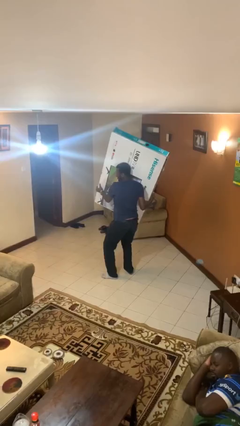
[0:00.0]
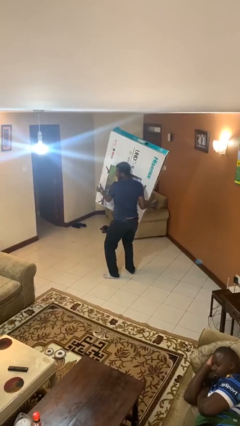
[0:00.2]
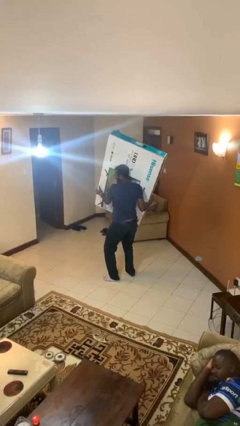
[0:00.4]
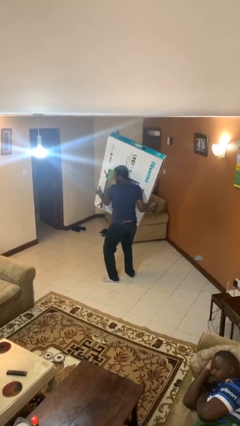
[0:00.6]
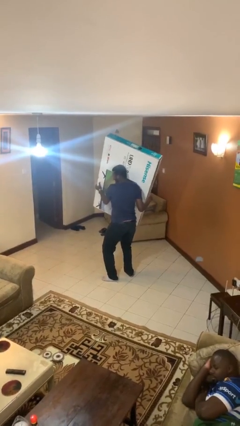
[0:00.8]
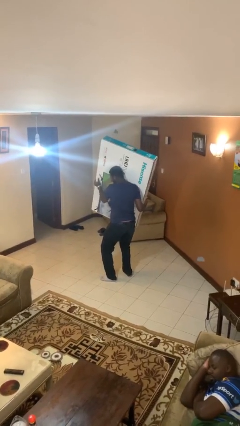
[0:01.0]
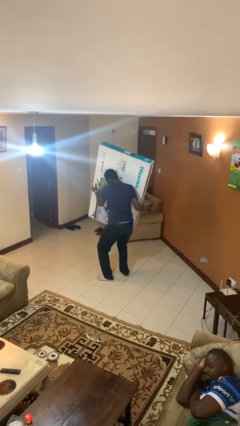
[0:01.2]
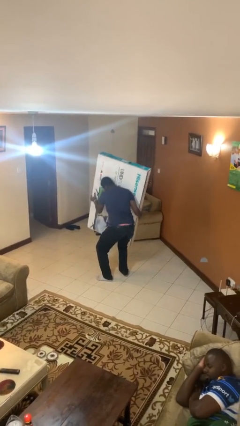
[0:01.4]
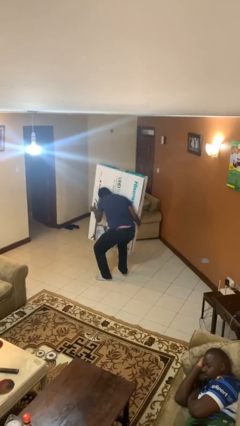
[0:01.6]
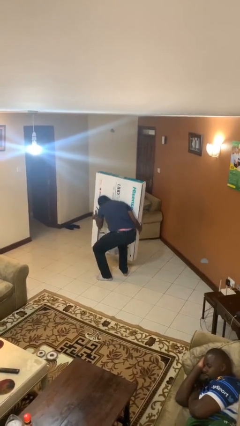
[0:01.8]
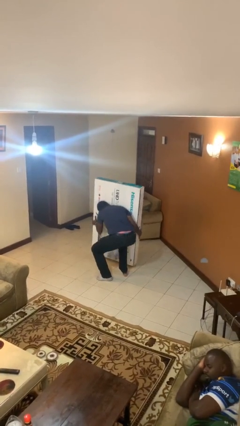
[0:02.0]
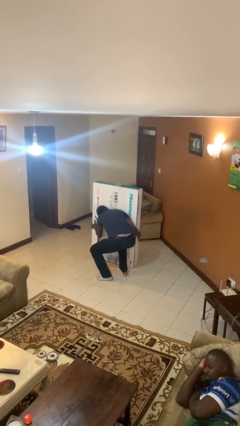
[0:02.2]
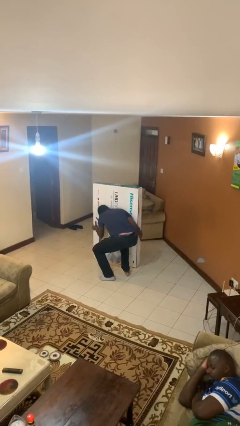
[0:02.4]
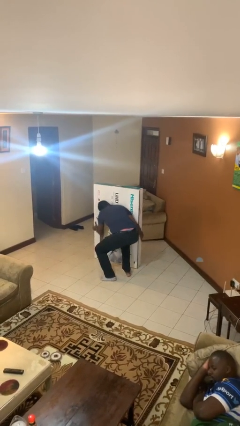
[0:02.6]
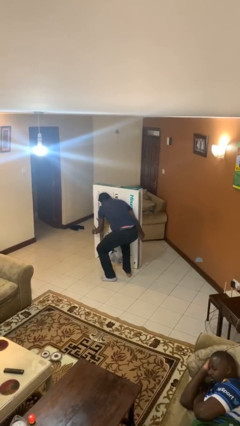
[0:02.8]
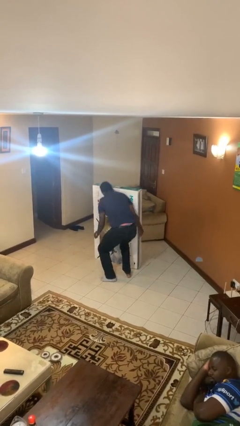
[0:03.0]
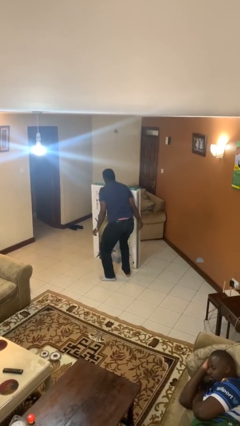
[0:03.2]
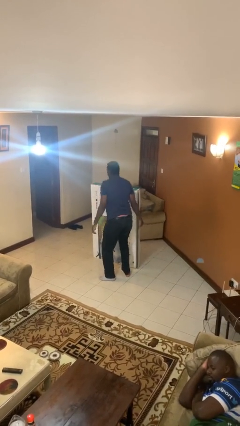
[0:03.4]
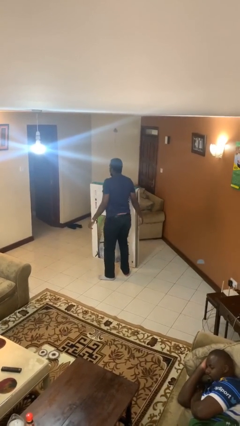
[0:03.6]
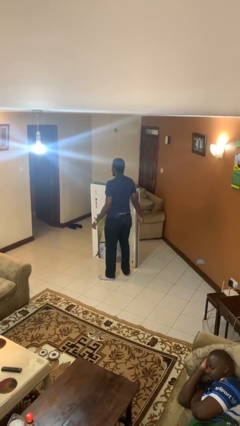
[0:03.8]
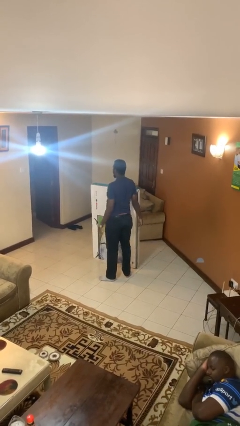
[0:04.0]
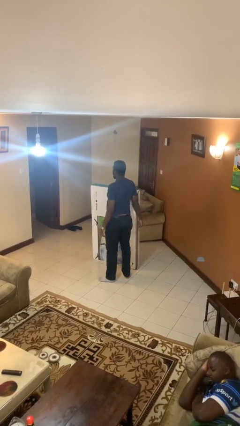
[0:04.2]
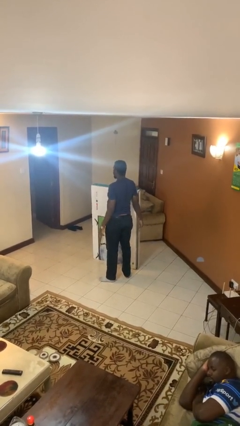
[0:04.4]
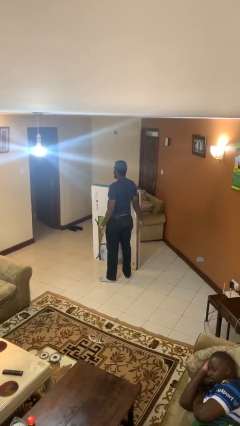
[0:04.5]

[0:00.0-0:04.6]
person puts down object on floor

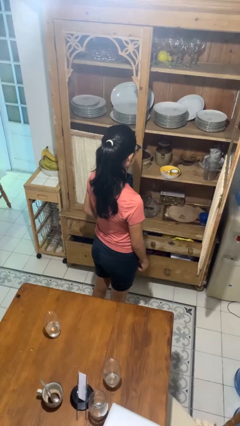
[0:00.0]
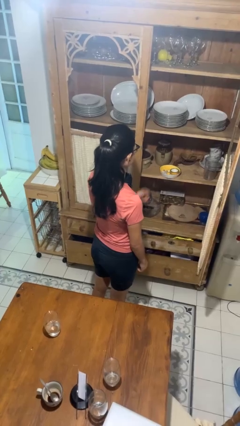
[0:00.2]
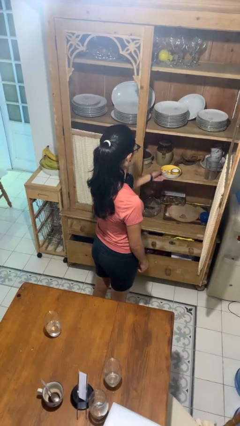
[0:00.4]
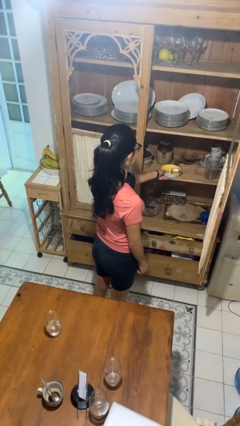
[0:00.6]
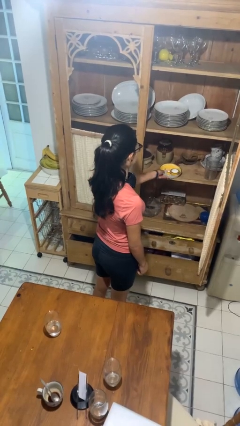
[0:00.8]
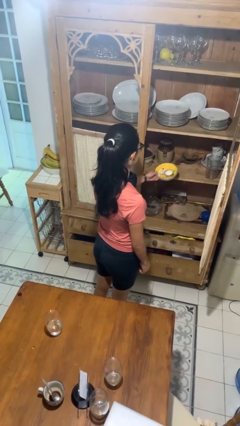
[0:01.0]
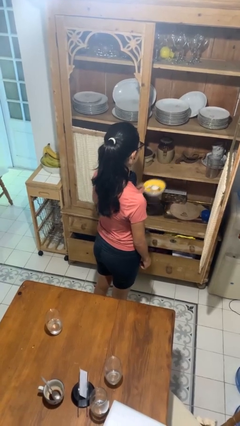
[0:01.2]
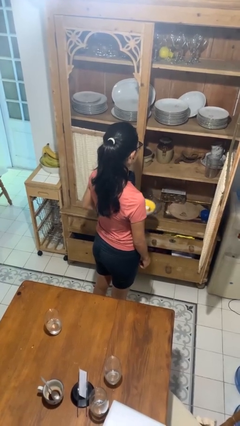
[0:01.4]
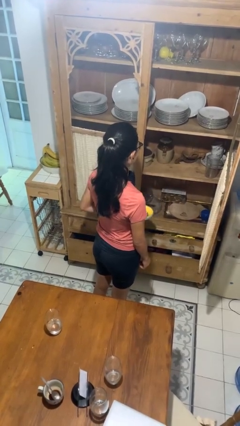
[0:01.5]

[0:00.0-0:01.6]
person takes object from cabinet

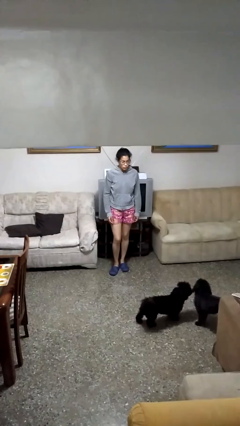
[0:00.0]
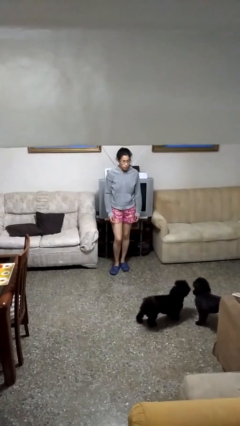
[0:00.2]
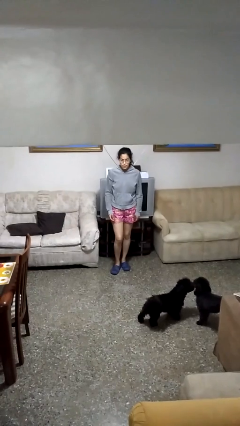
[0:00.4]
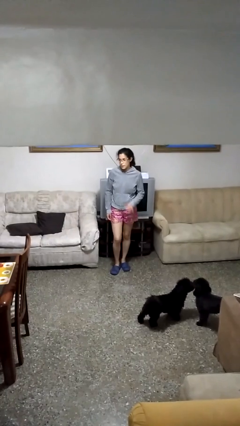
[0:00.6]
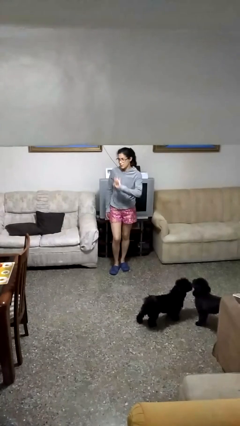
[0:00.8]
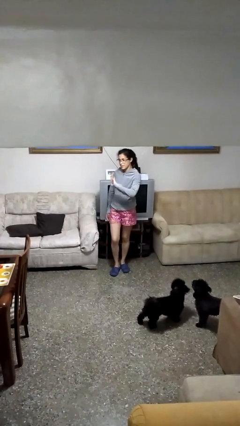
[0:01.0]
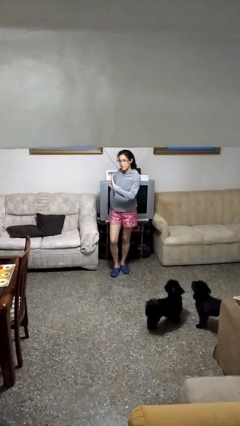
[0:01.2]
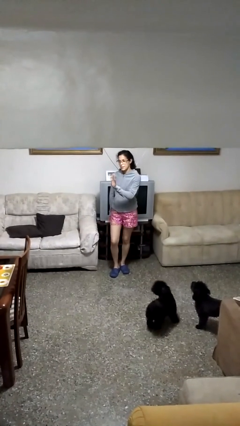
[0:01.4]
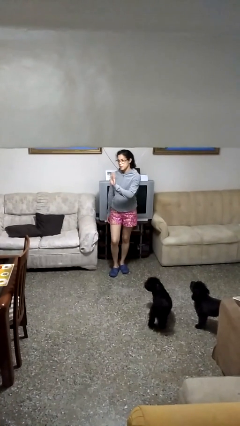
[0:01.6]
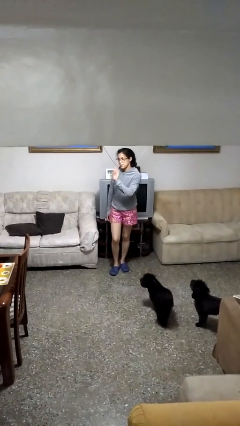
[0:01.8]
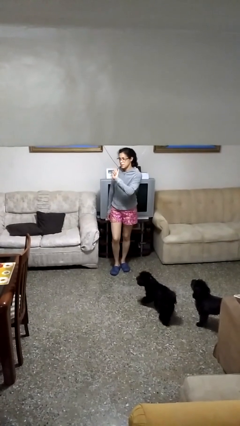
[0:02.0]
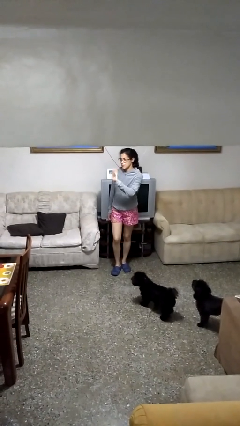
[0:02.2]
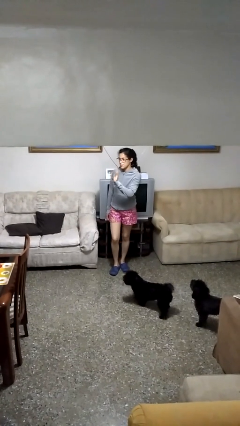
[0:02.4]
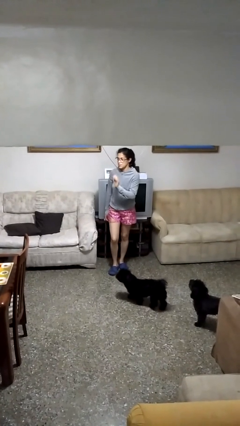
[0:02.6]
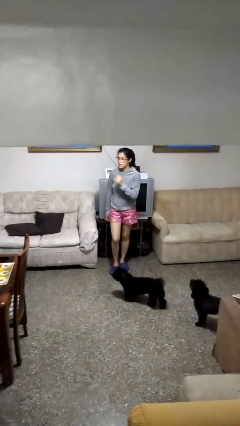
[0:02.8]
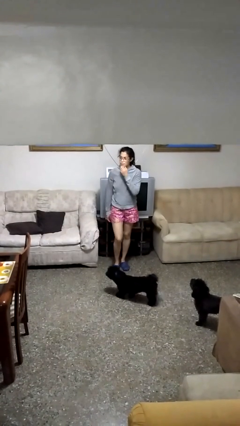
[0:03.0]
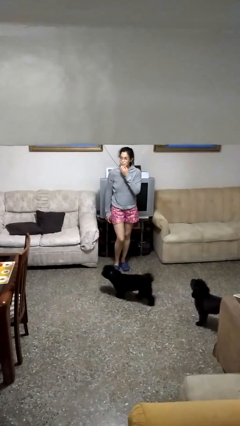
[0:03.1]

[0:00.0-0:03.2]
person waves at person

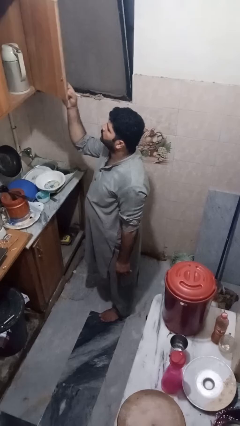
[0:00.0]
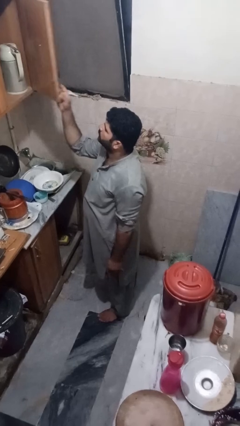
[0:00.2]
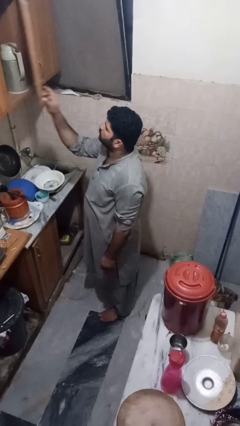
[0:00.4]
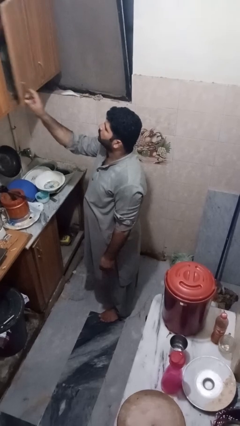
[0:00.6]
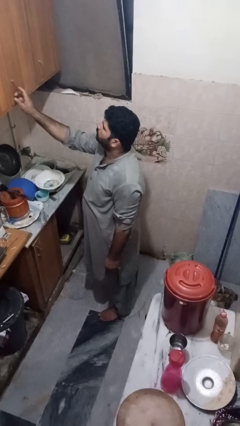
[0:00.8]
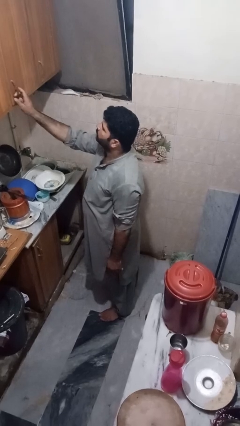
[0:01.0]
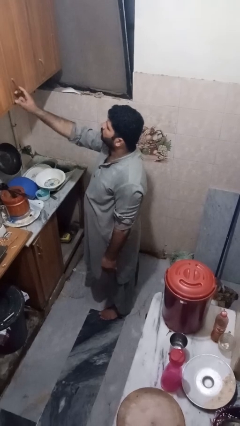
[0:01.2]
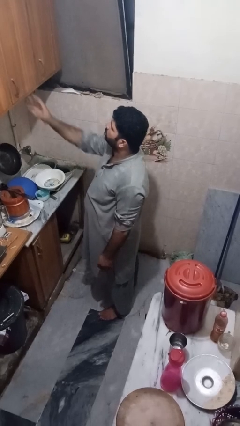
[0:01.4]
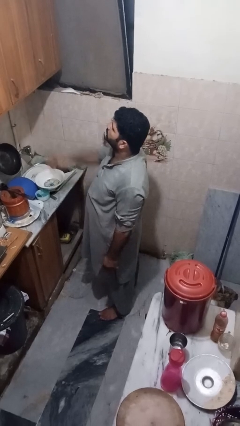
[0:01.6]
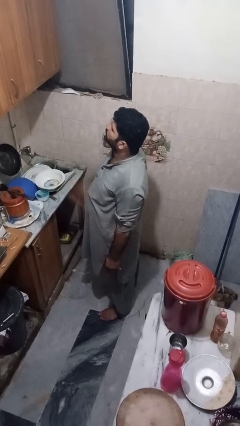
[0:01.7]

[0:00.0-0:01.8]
person closes cabinet

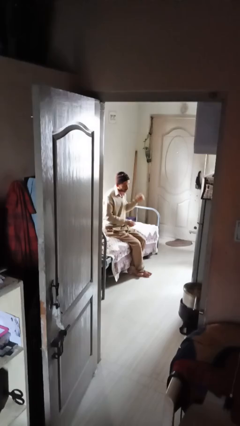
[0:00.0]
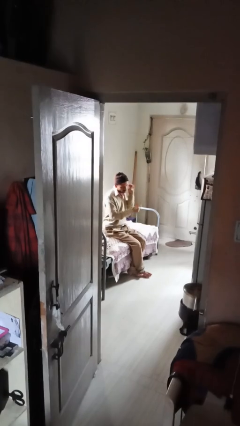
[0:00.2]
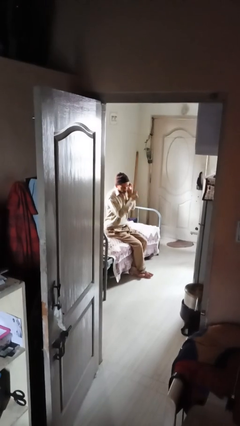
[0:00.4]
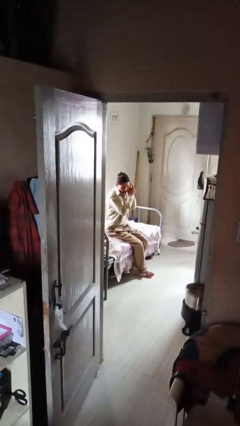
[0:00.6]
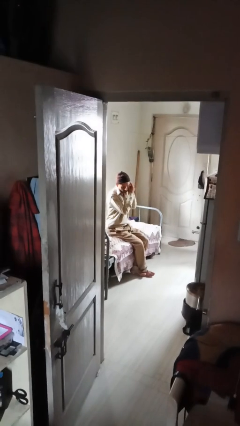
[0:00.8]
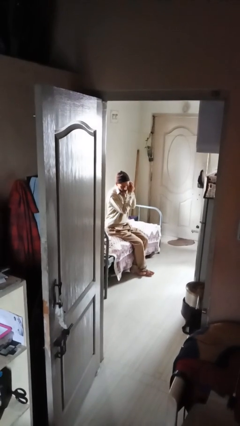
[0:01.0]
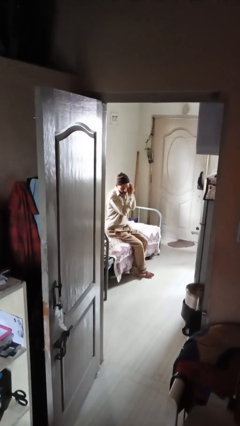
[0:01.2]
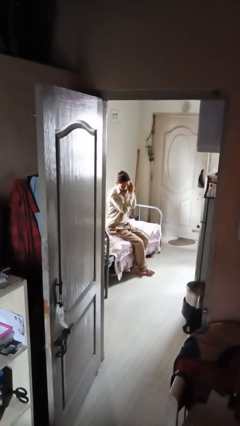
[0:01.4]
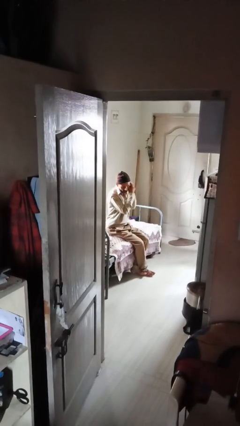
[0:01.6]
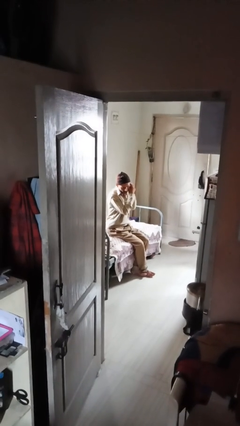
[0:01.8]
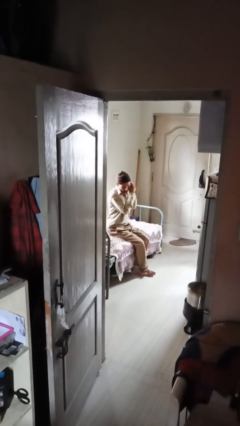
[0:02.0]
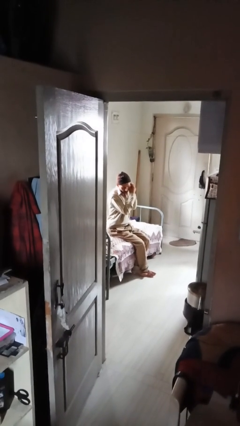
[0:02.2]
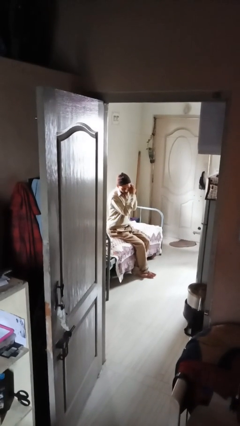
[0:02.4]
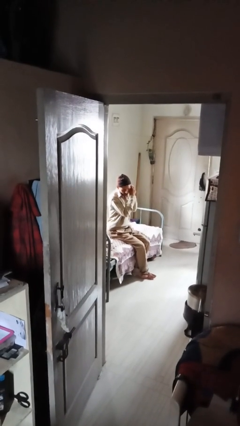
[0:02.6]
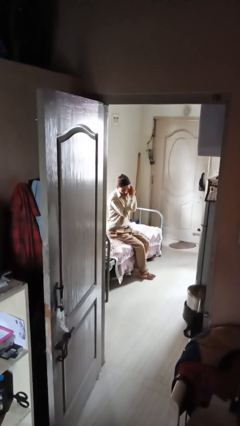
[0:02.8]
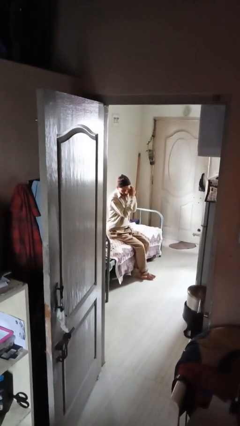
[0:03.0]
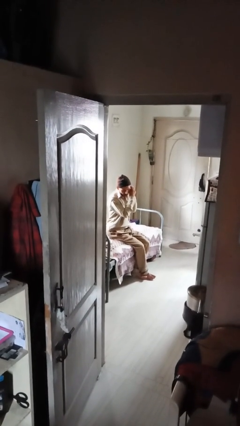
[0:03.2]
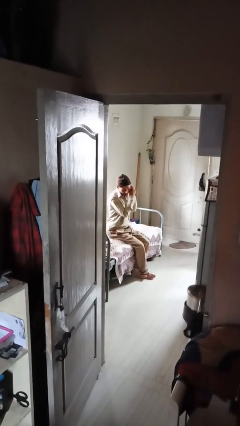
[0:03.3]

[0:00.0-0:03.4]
person puts on earrings

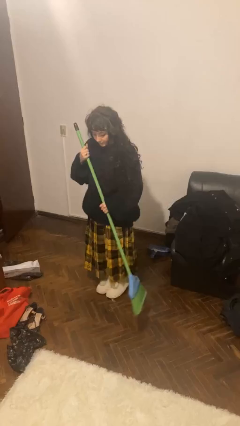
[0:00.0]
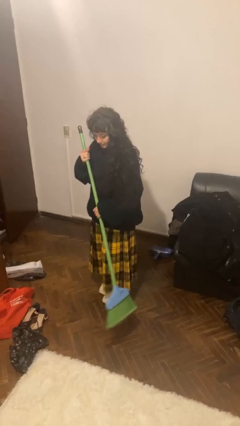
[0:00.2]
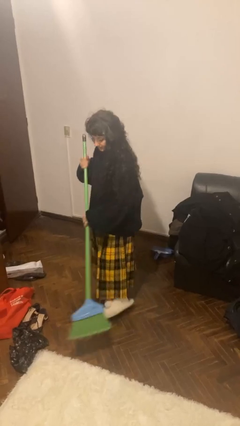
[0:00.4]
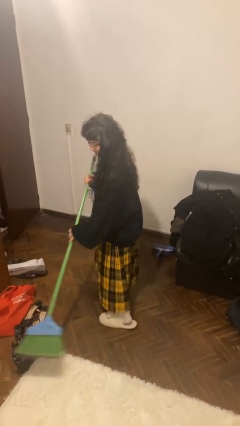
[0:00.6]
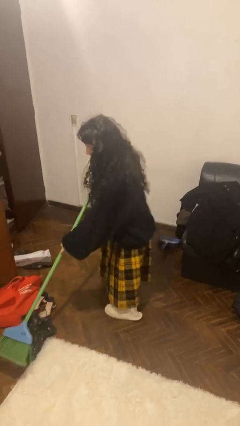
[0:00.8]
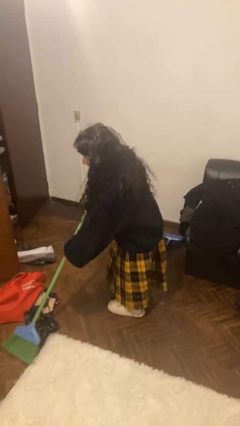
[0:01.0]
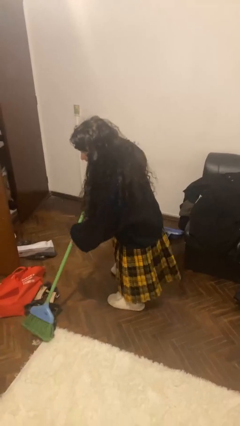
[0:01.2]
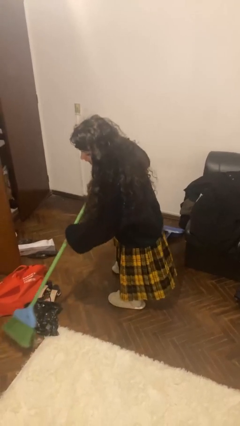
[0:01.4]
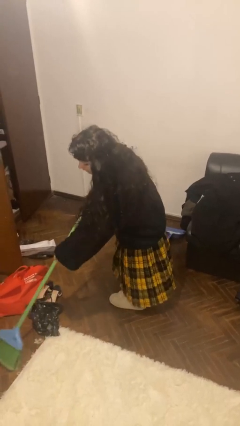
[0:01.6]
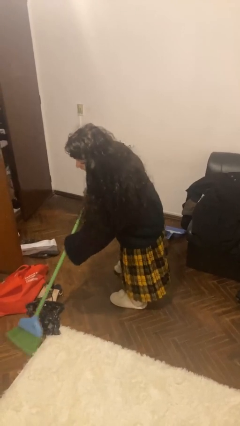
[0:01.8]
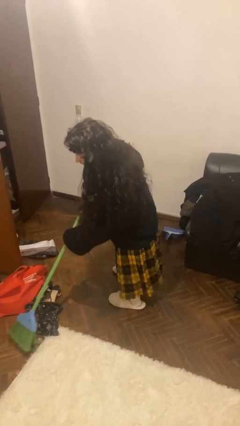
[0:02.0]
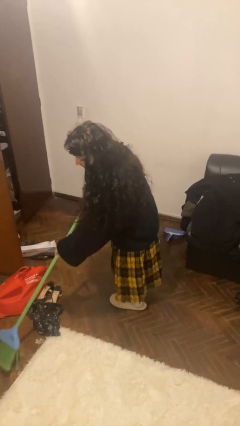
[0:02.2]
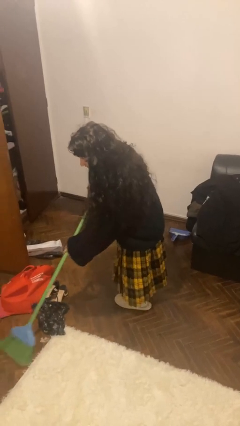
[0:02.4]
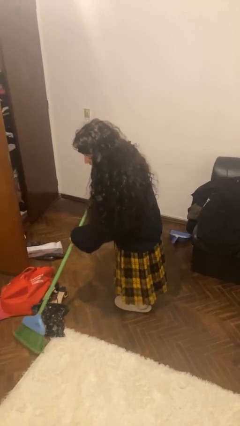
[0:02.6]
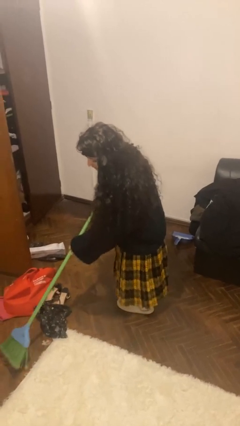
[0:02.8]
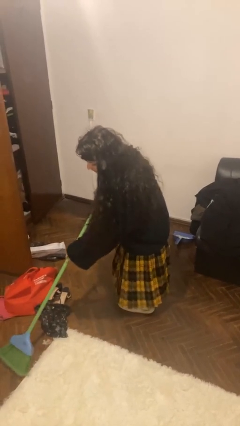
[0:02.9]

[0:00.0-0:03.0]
person sweeps floor
